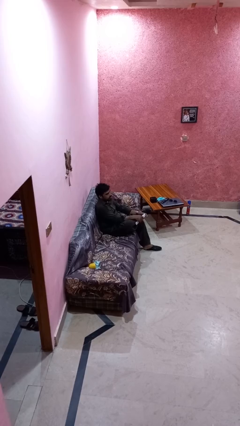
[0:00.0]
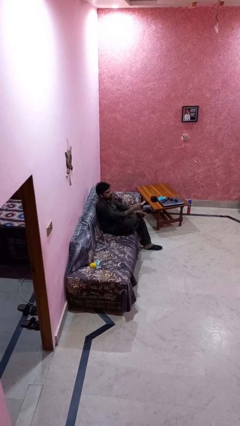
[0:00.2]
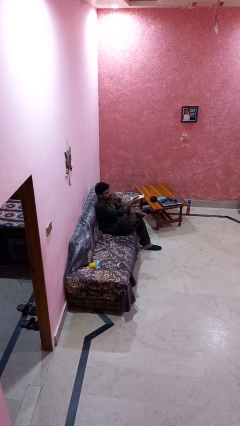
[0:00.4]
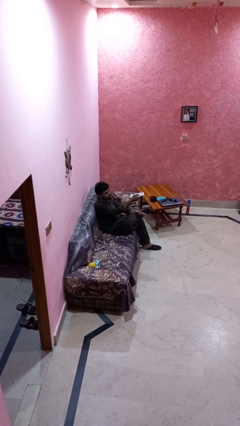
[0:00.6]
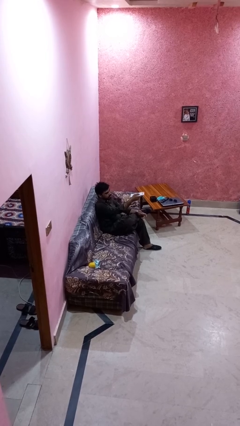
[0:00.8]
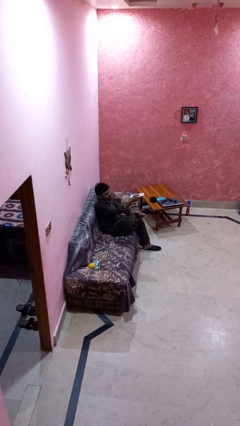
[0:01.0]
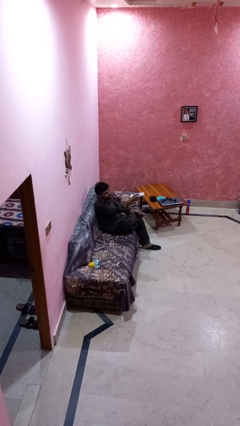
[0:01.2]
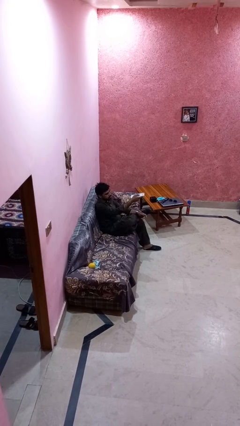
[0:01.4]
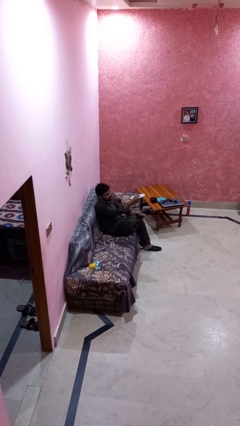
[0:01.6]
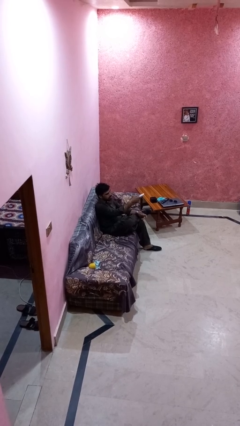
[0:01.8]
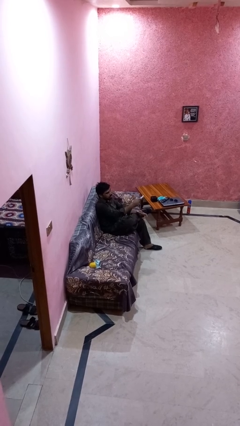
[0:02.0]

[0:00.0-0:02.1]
person uses television remote

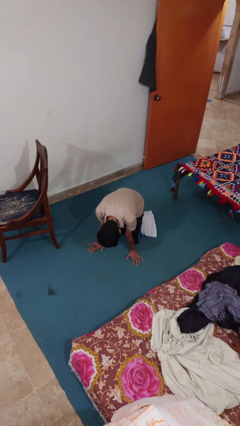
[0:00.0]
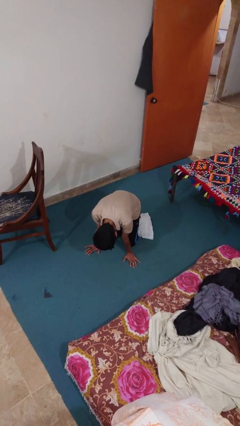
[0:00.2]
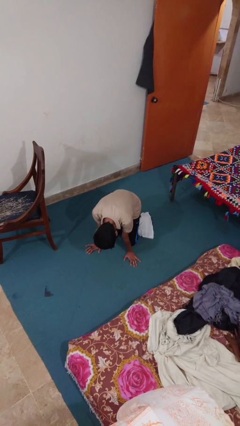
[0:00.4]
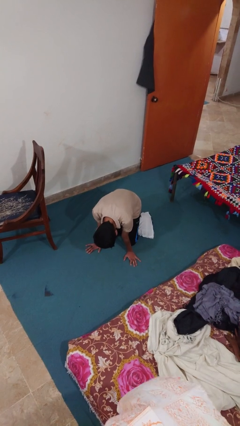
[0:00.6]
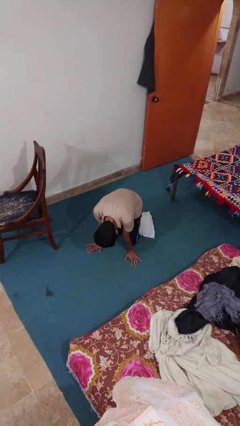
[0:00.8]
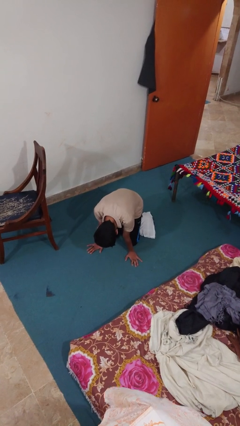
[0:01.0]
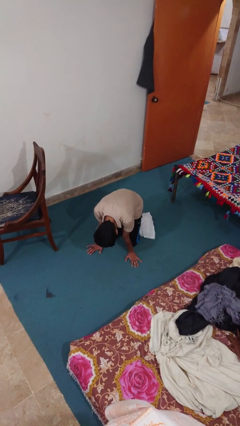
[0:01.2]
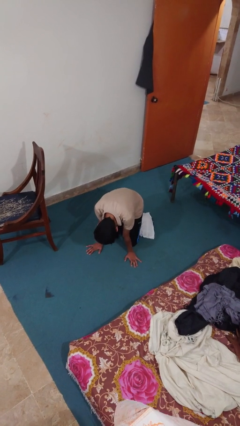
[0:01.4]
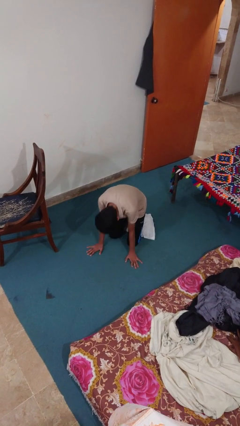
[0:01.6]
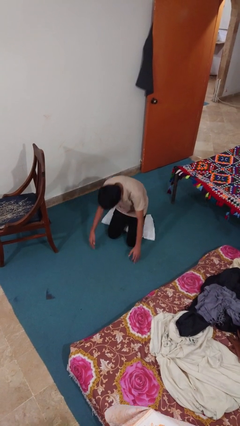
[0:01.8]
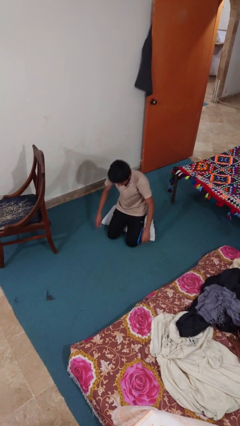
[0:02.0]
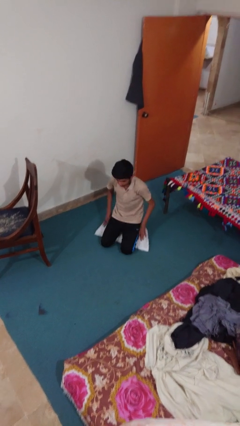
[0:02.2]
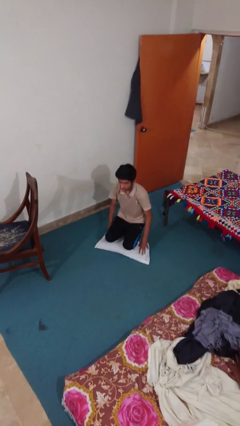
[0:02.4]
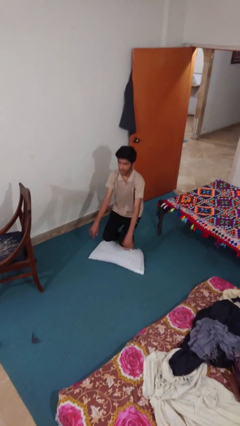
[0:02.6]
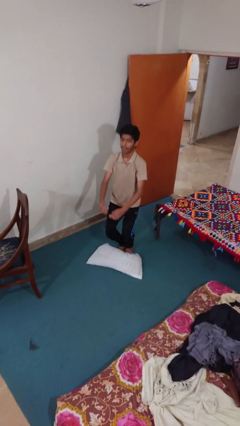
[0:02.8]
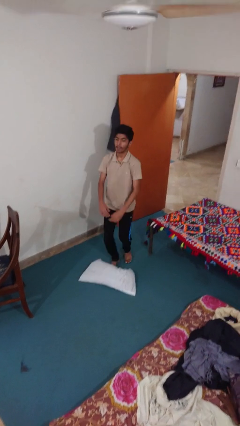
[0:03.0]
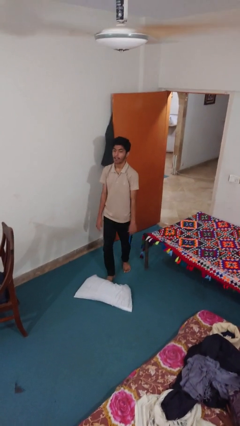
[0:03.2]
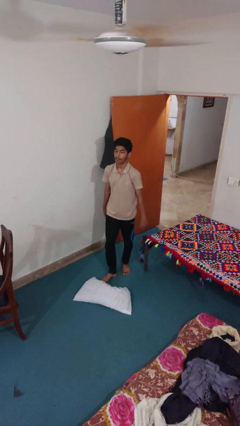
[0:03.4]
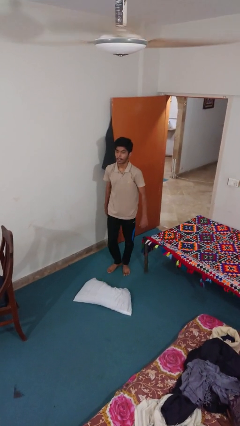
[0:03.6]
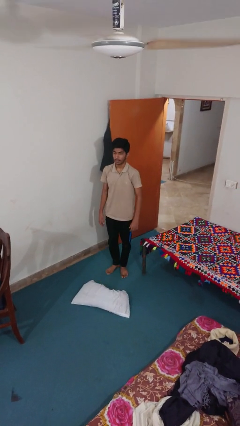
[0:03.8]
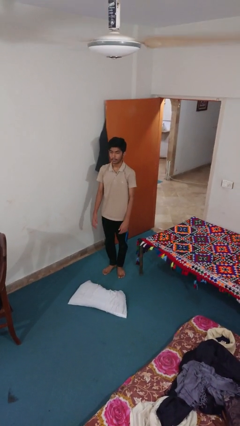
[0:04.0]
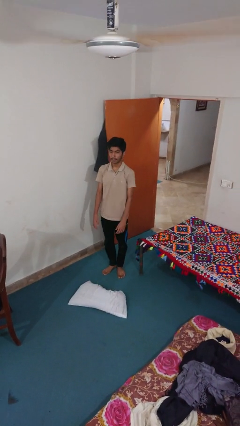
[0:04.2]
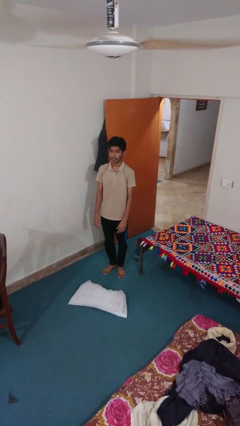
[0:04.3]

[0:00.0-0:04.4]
person stands up from floor

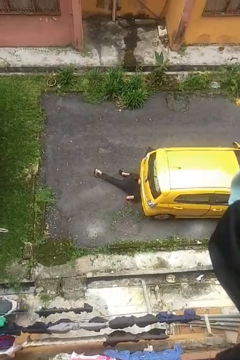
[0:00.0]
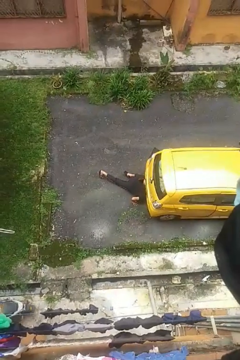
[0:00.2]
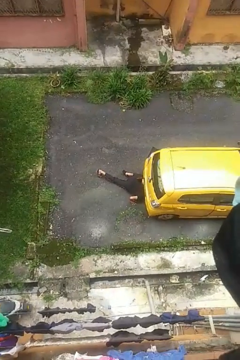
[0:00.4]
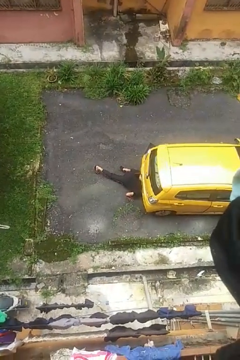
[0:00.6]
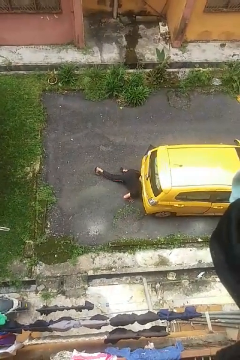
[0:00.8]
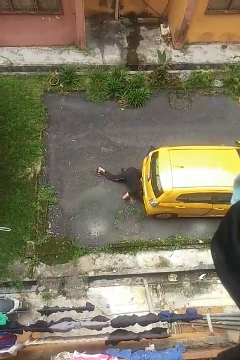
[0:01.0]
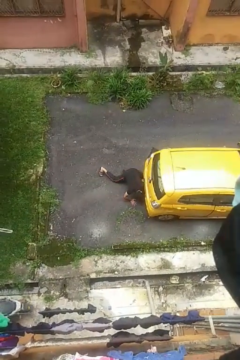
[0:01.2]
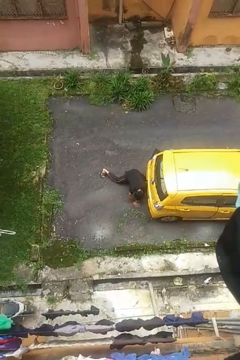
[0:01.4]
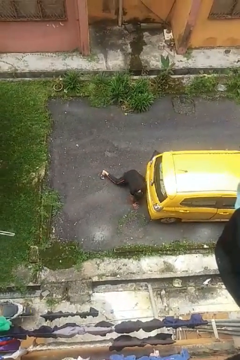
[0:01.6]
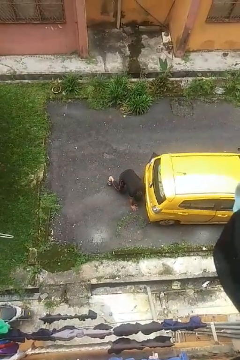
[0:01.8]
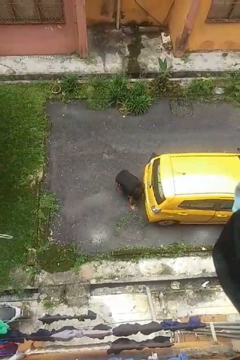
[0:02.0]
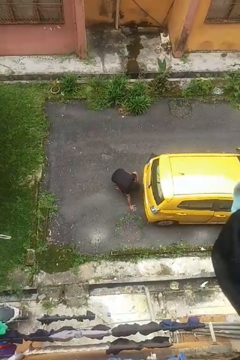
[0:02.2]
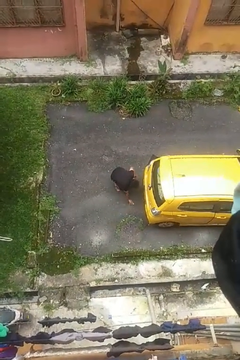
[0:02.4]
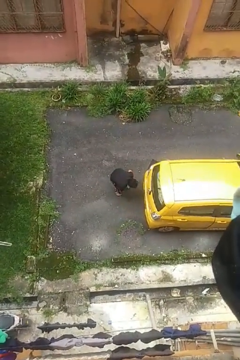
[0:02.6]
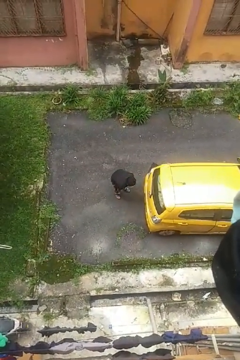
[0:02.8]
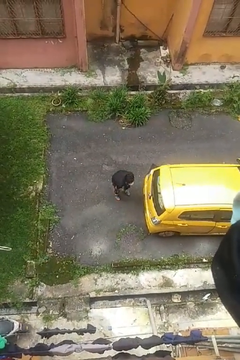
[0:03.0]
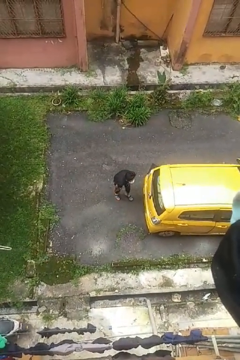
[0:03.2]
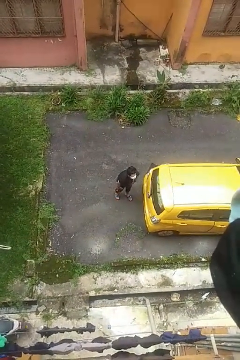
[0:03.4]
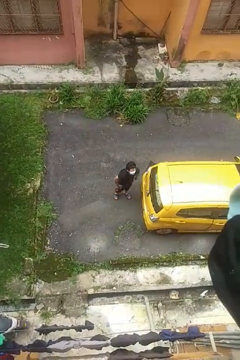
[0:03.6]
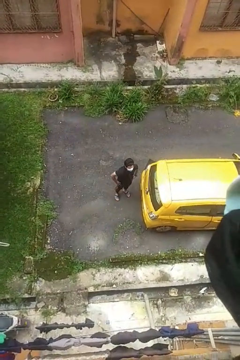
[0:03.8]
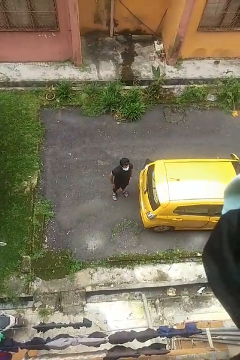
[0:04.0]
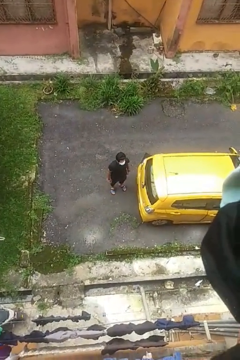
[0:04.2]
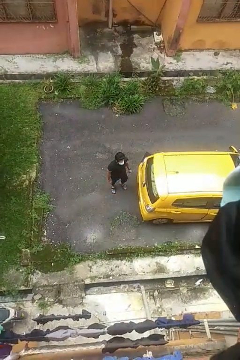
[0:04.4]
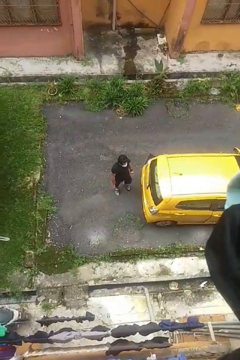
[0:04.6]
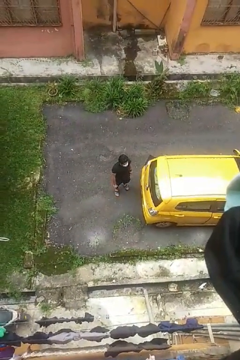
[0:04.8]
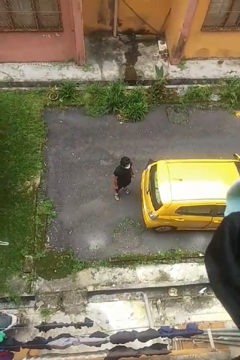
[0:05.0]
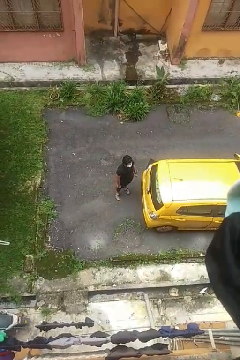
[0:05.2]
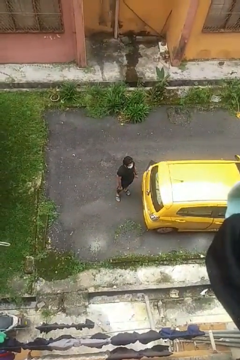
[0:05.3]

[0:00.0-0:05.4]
person crawls out from under vehicle

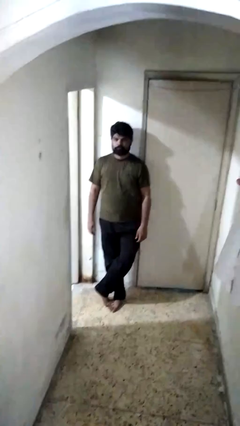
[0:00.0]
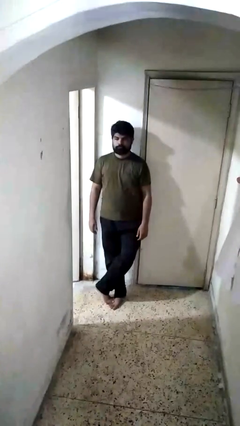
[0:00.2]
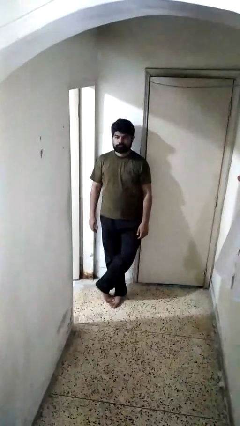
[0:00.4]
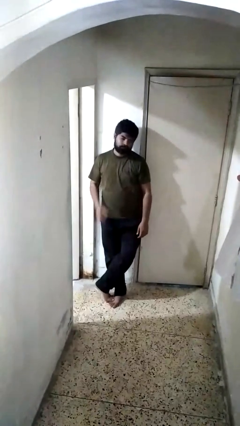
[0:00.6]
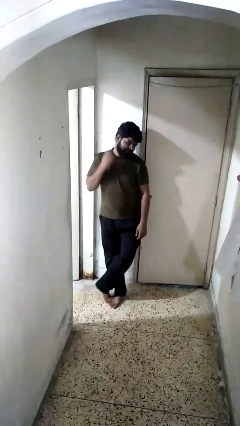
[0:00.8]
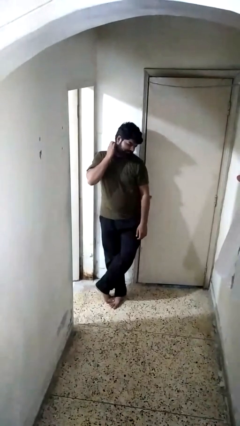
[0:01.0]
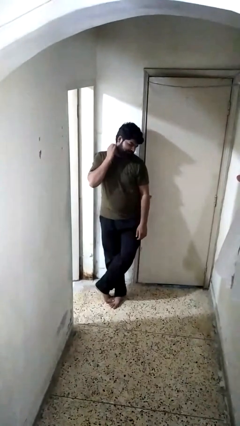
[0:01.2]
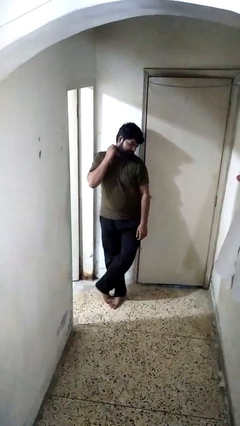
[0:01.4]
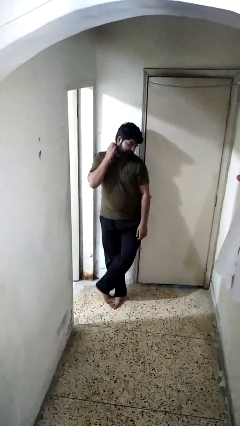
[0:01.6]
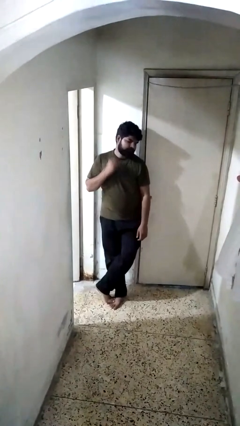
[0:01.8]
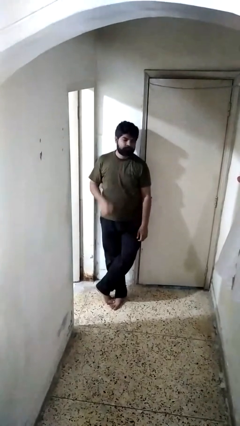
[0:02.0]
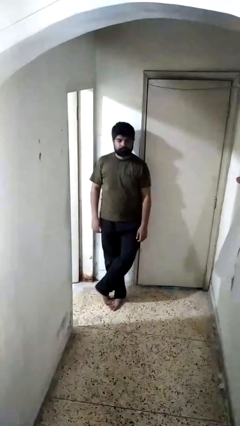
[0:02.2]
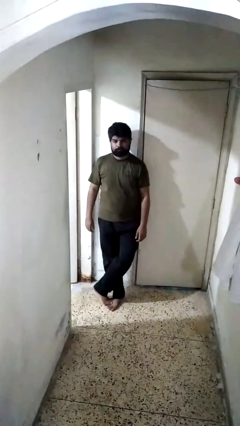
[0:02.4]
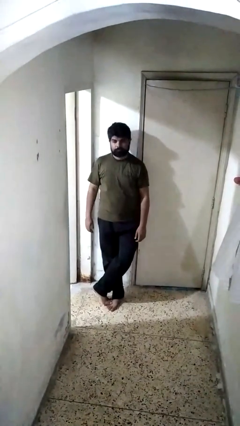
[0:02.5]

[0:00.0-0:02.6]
person rubs neck

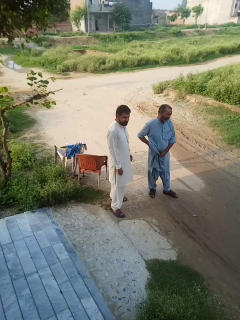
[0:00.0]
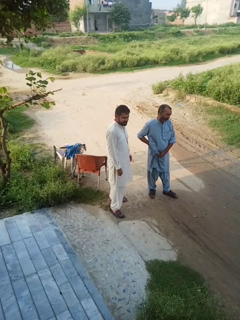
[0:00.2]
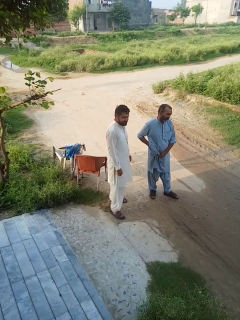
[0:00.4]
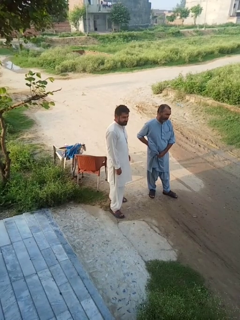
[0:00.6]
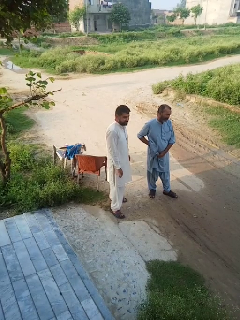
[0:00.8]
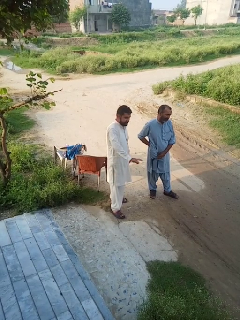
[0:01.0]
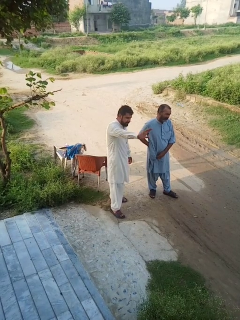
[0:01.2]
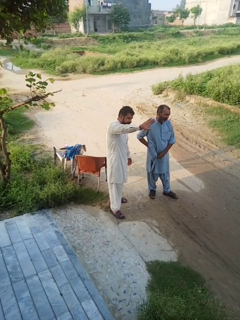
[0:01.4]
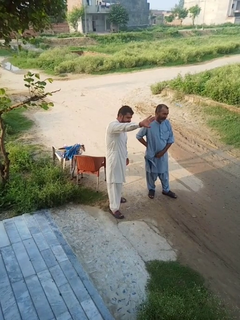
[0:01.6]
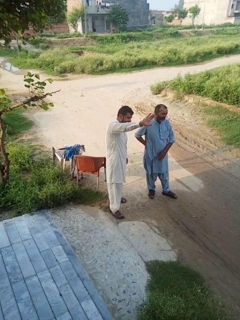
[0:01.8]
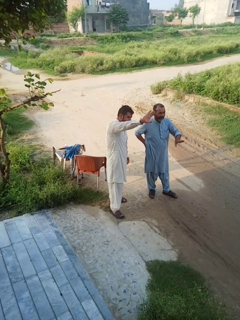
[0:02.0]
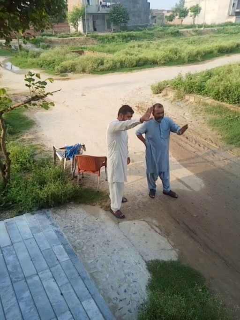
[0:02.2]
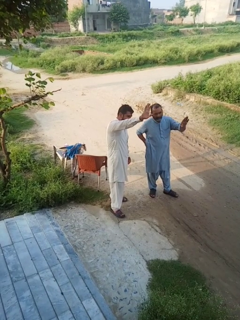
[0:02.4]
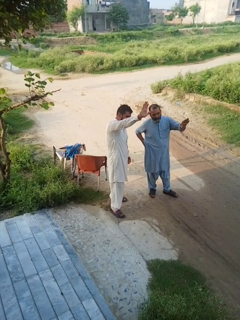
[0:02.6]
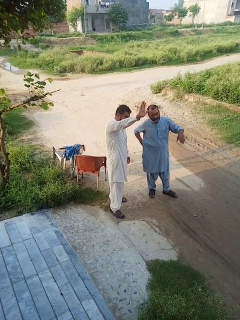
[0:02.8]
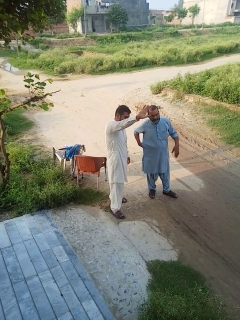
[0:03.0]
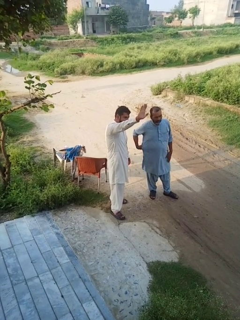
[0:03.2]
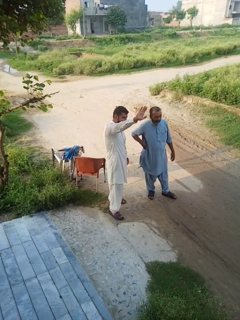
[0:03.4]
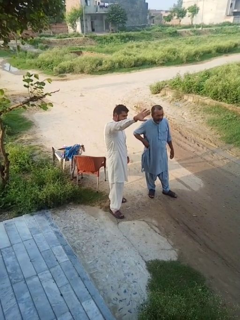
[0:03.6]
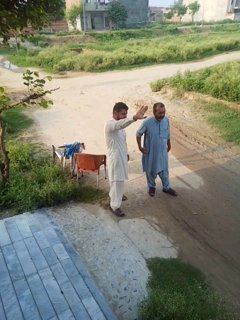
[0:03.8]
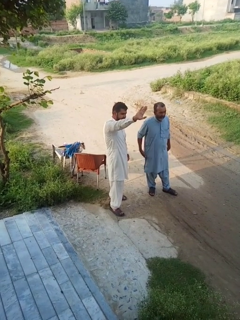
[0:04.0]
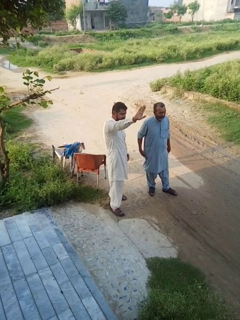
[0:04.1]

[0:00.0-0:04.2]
person waves at person

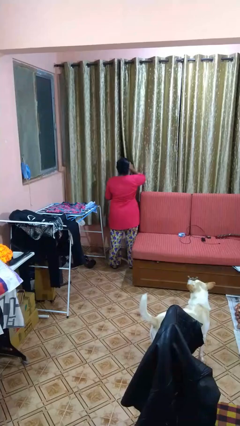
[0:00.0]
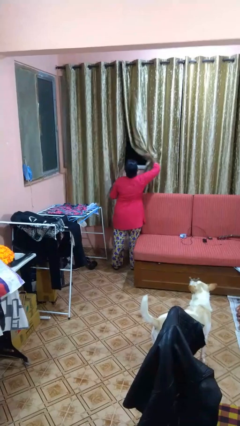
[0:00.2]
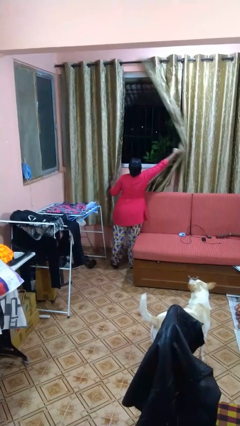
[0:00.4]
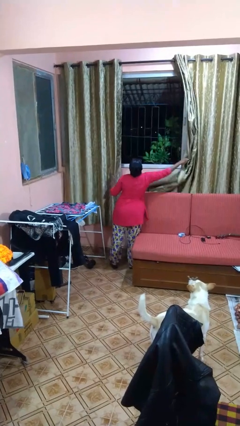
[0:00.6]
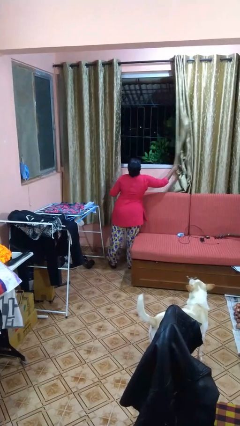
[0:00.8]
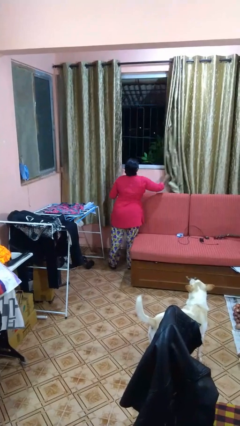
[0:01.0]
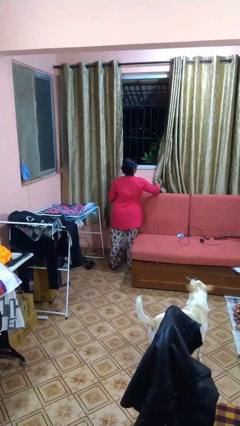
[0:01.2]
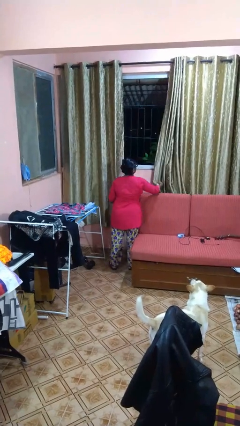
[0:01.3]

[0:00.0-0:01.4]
person opens curtains
